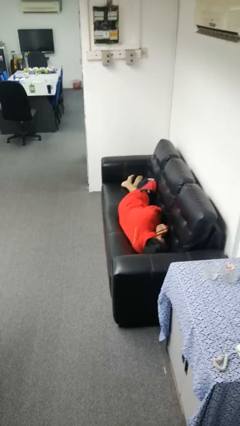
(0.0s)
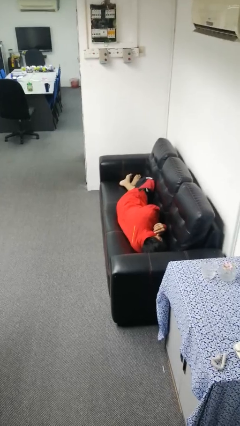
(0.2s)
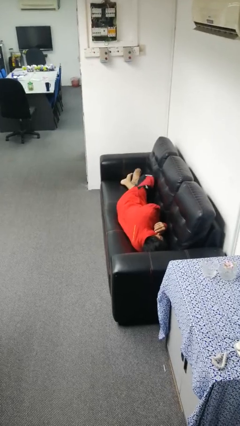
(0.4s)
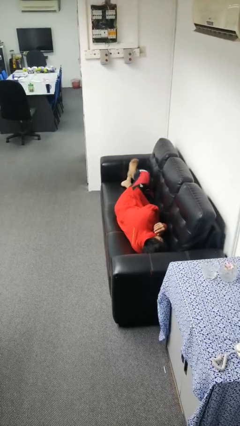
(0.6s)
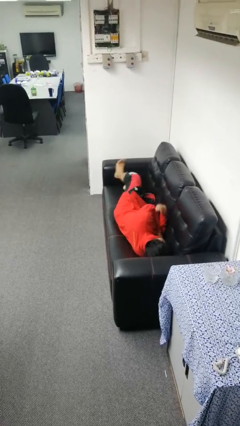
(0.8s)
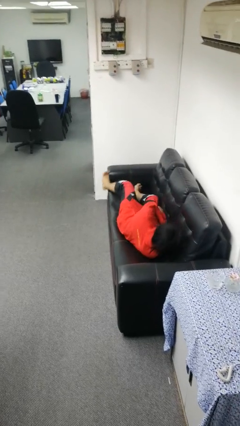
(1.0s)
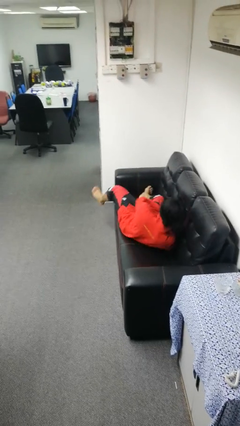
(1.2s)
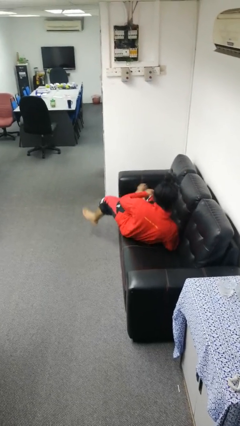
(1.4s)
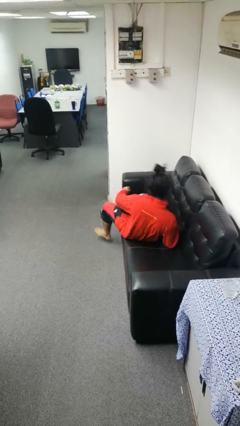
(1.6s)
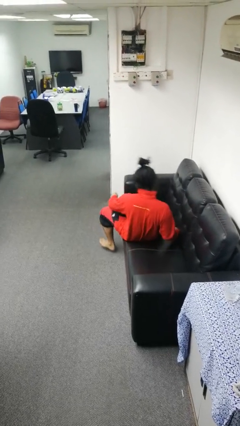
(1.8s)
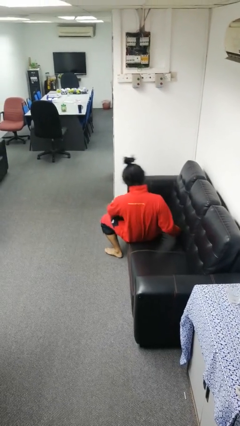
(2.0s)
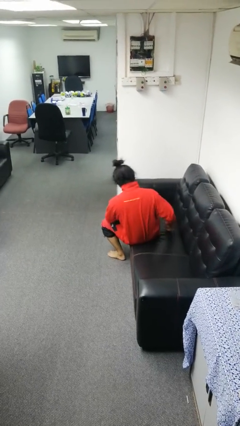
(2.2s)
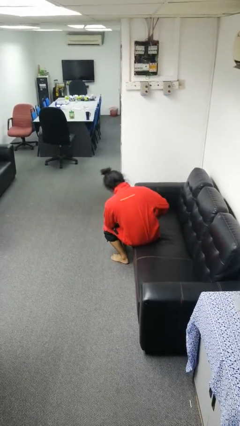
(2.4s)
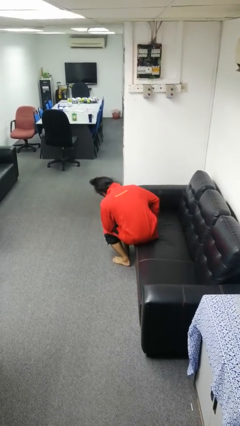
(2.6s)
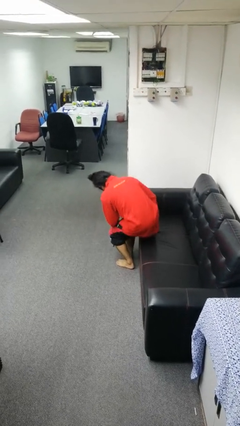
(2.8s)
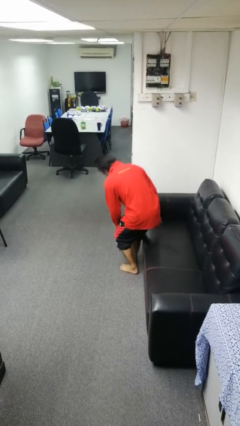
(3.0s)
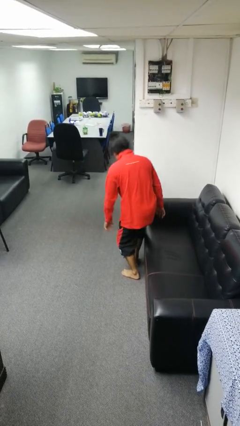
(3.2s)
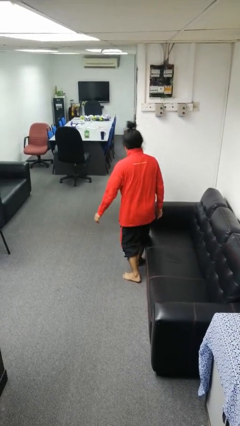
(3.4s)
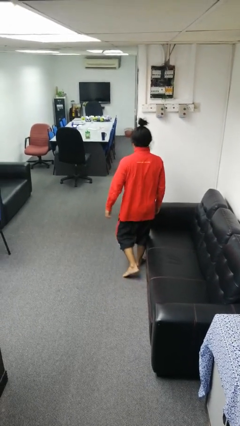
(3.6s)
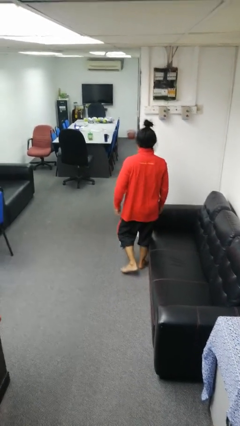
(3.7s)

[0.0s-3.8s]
person stands up

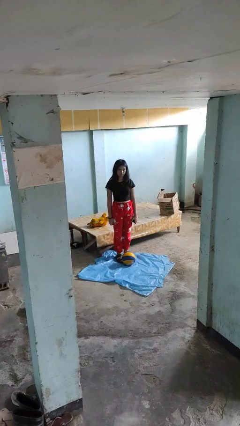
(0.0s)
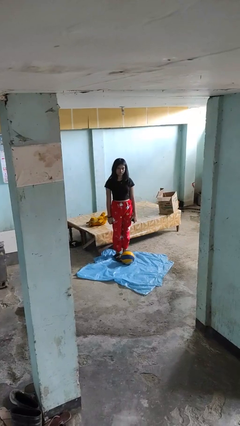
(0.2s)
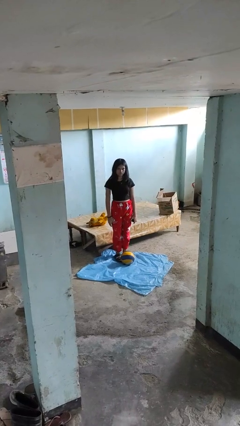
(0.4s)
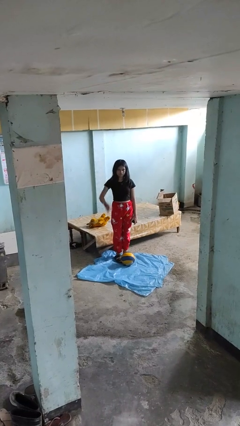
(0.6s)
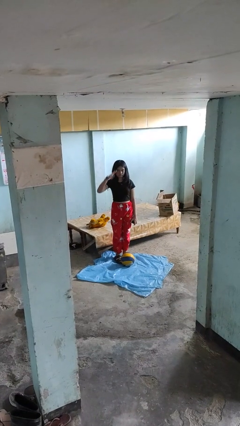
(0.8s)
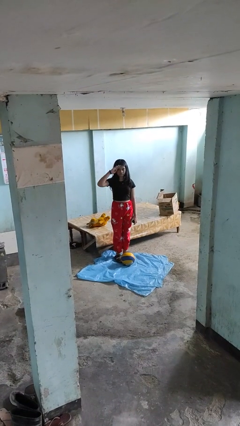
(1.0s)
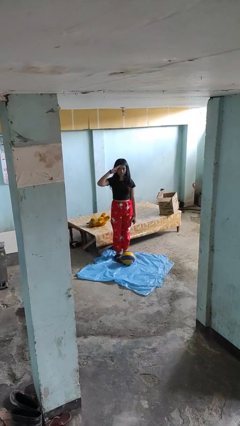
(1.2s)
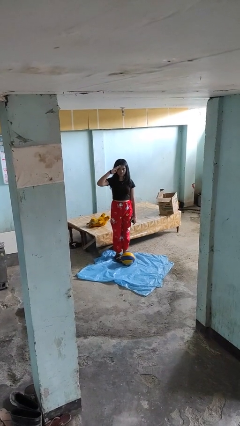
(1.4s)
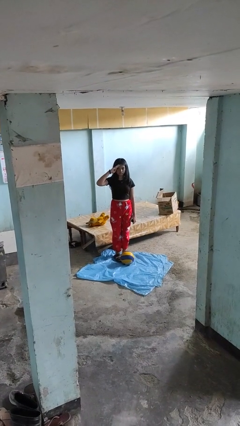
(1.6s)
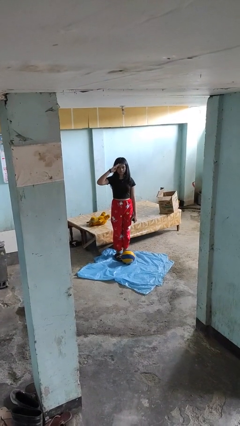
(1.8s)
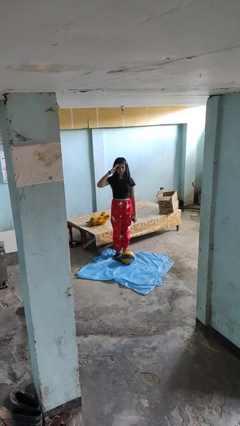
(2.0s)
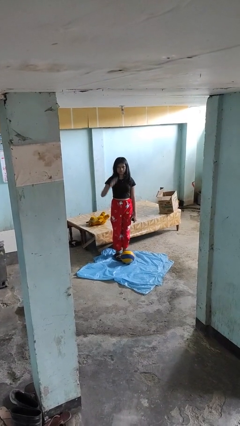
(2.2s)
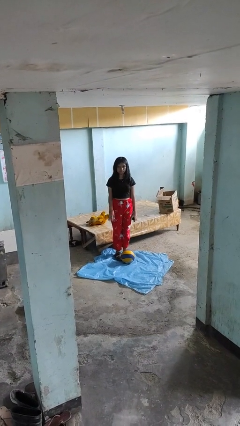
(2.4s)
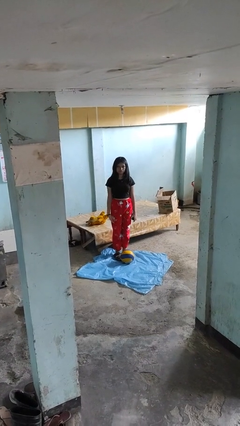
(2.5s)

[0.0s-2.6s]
person salutes

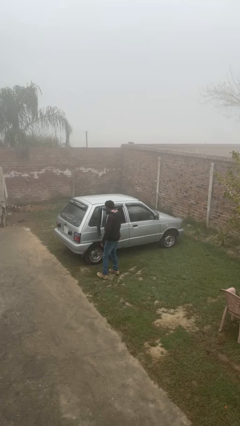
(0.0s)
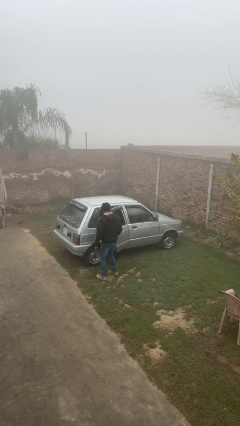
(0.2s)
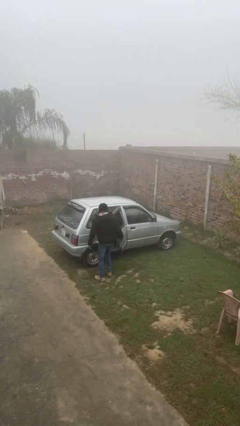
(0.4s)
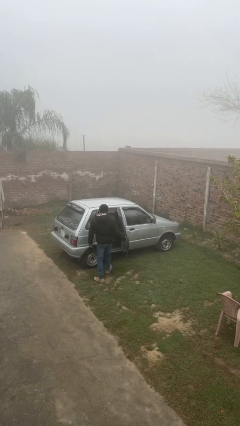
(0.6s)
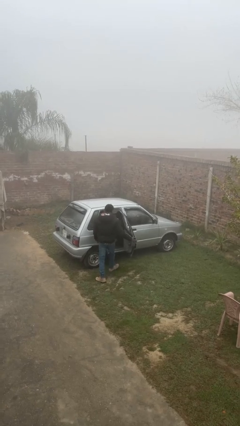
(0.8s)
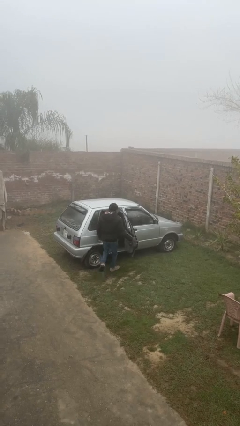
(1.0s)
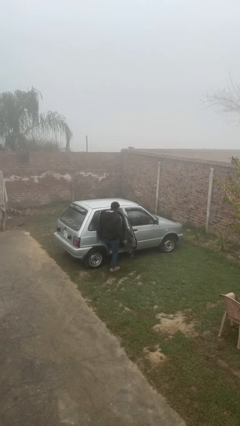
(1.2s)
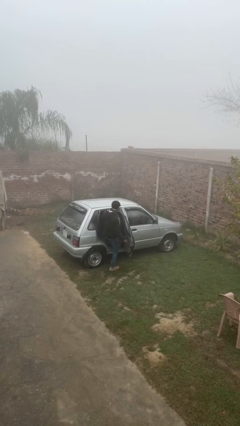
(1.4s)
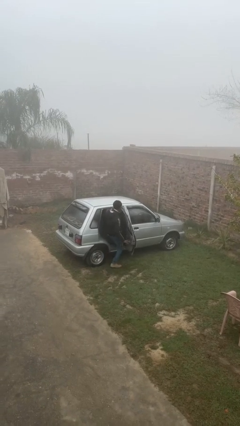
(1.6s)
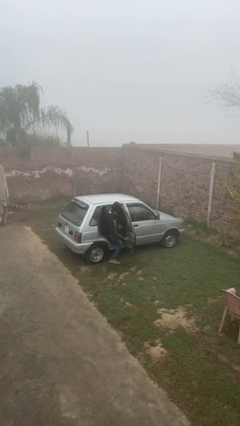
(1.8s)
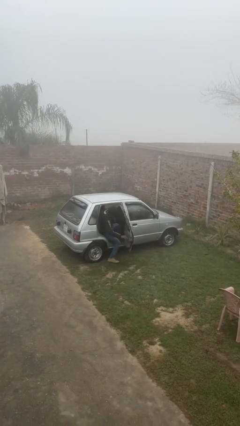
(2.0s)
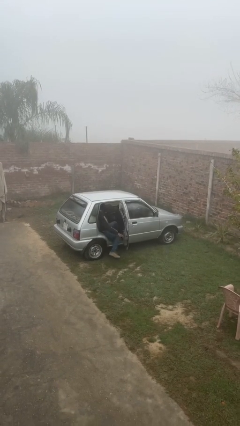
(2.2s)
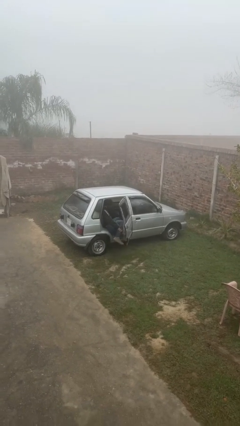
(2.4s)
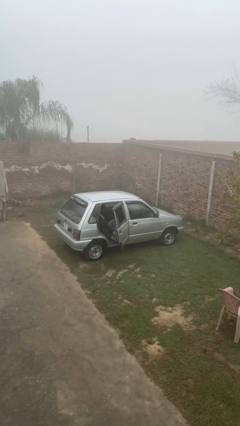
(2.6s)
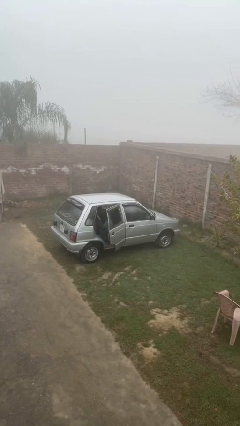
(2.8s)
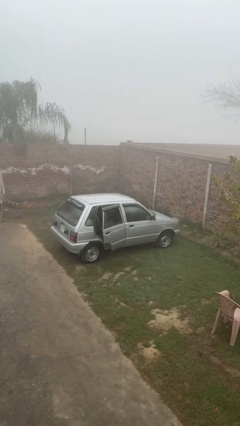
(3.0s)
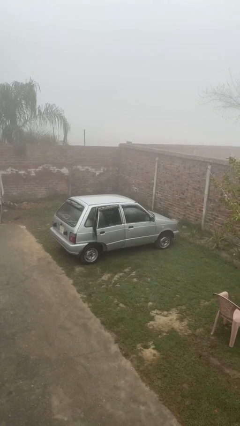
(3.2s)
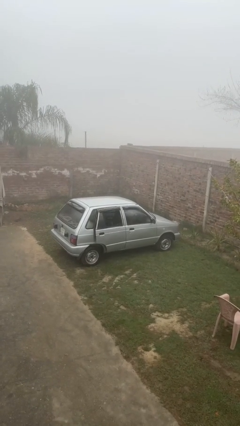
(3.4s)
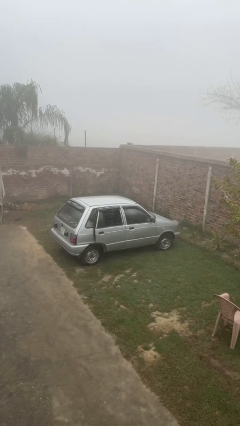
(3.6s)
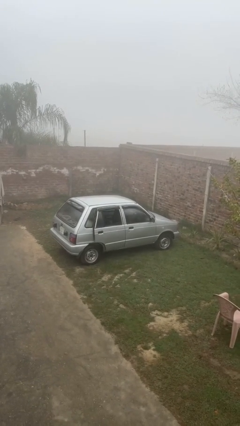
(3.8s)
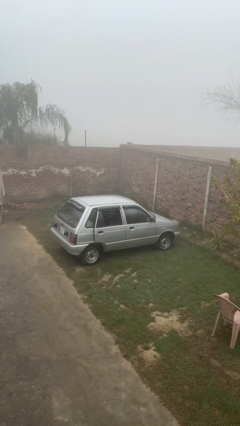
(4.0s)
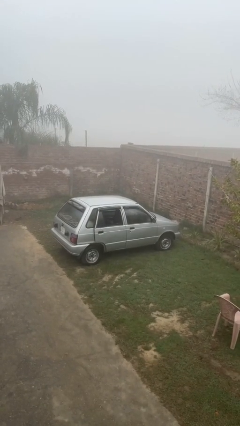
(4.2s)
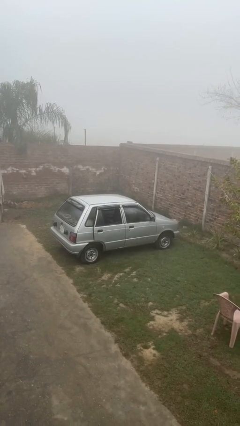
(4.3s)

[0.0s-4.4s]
car picks up person

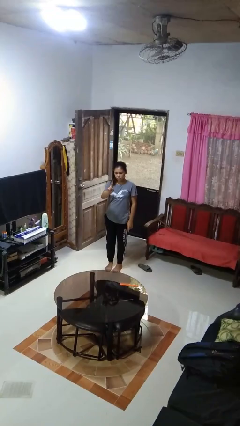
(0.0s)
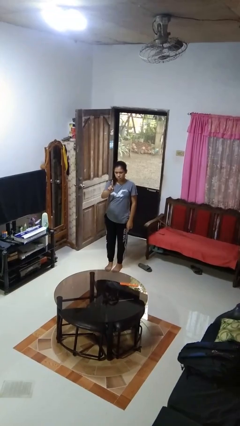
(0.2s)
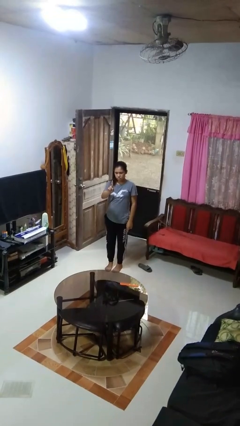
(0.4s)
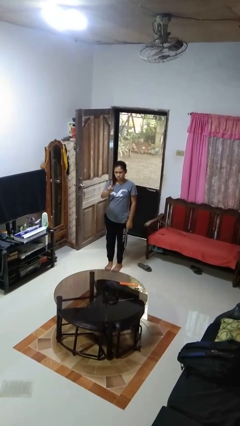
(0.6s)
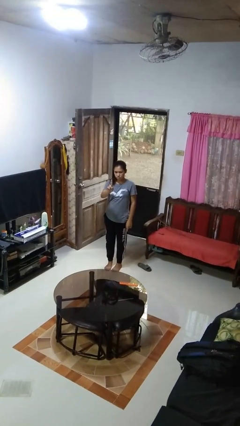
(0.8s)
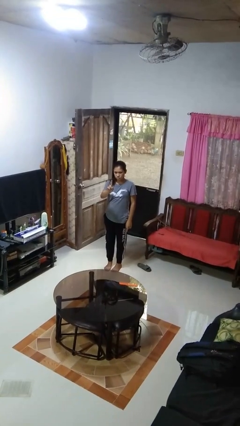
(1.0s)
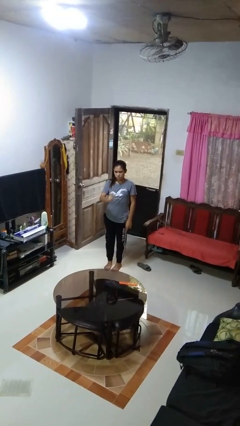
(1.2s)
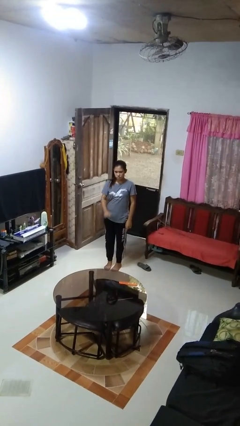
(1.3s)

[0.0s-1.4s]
person gestures number one

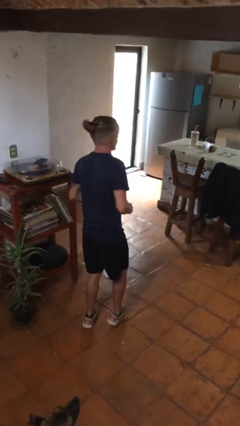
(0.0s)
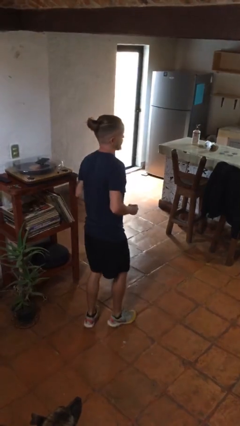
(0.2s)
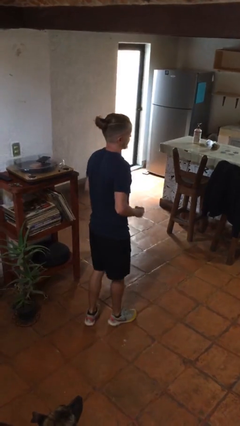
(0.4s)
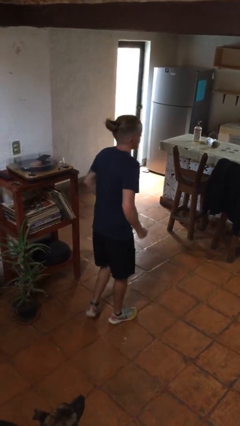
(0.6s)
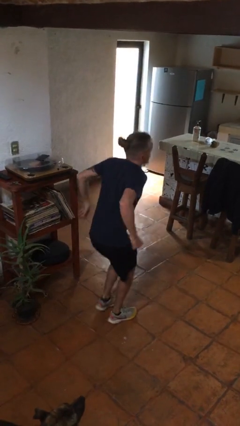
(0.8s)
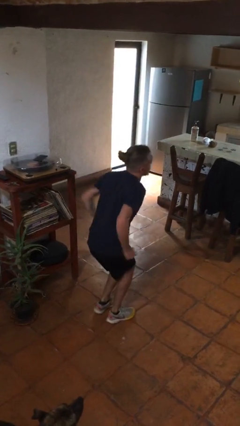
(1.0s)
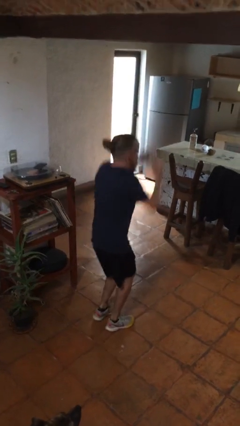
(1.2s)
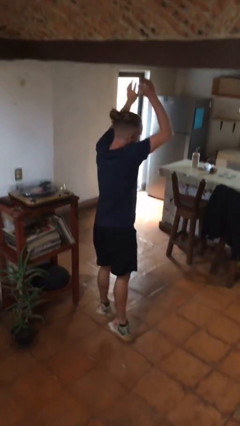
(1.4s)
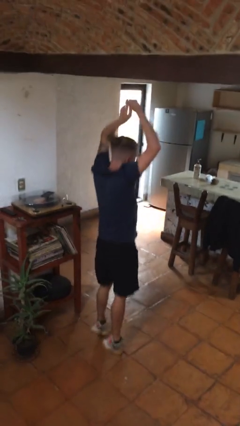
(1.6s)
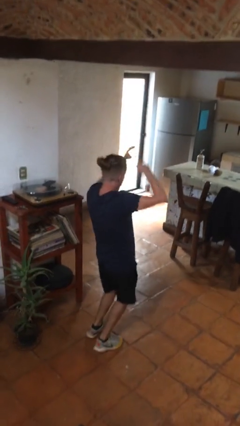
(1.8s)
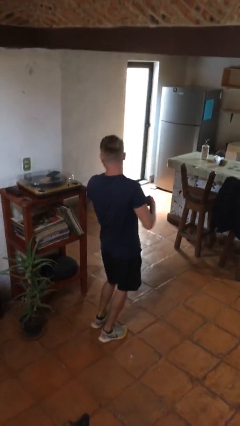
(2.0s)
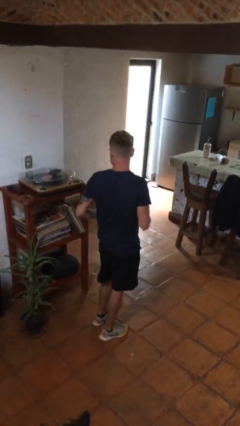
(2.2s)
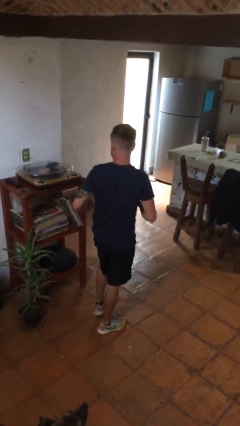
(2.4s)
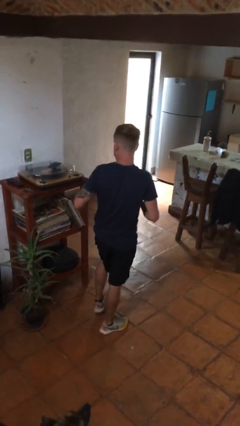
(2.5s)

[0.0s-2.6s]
person jumps

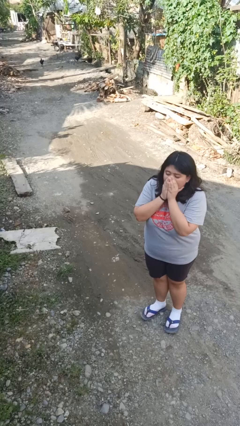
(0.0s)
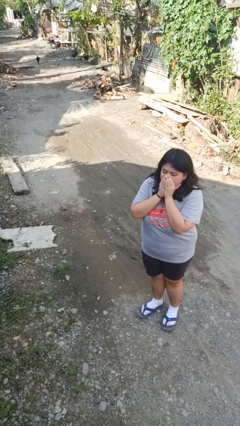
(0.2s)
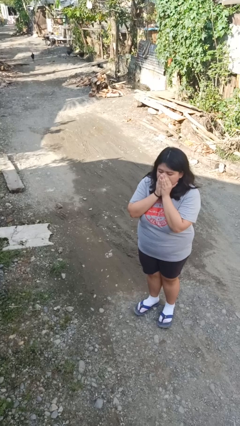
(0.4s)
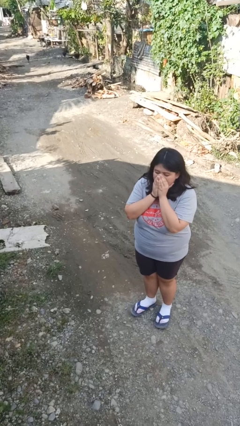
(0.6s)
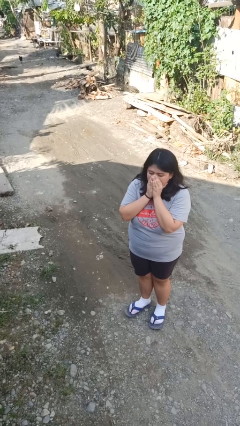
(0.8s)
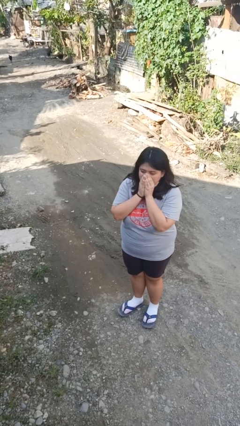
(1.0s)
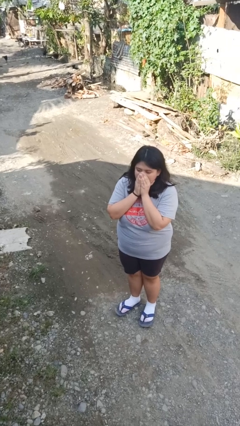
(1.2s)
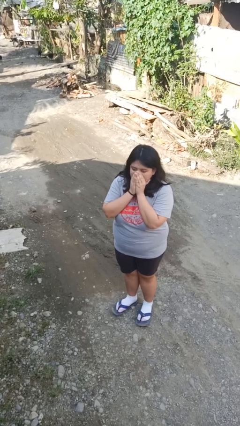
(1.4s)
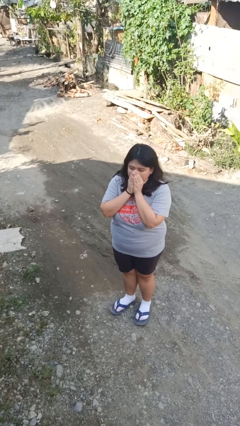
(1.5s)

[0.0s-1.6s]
person blows into hands

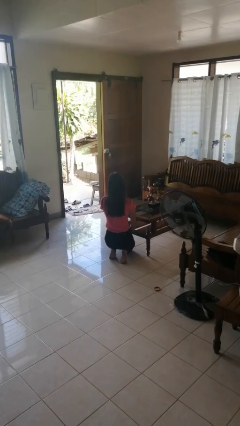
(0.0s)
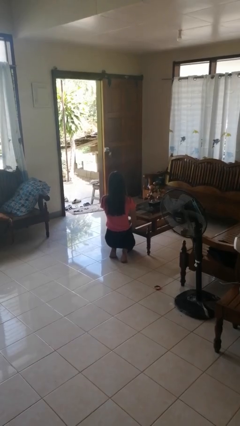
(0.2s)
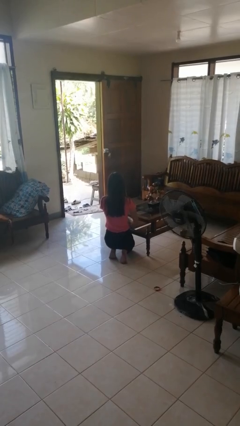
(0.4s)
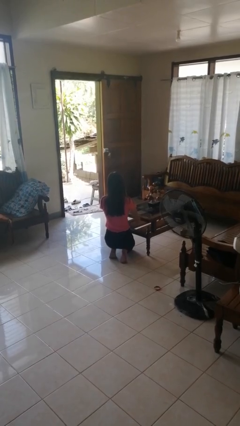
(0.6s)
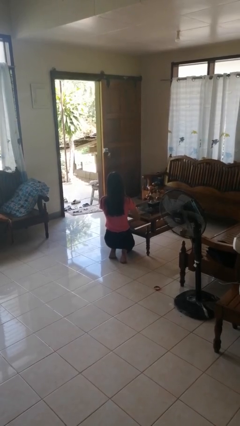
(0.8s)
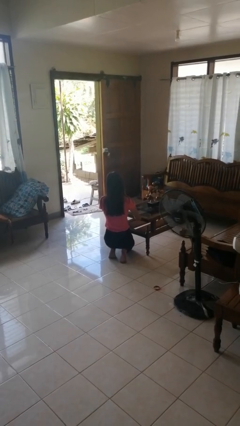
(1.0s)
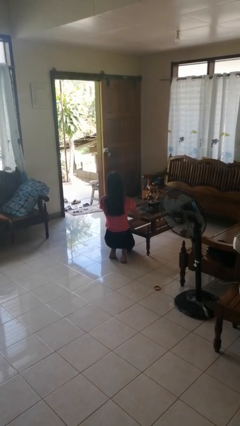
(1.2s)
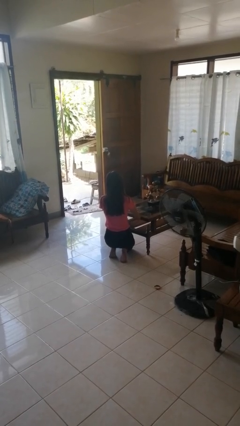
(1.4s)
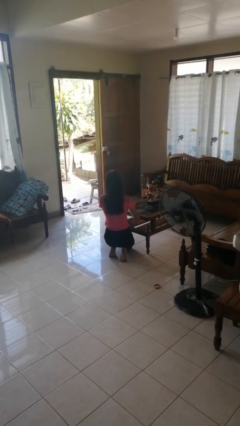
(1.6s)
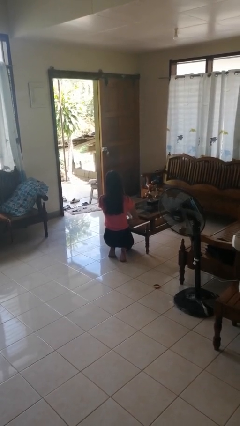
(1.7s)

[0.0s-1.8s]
person cleans table with rag
